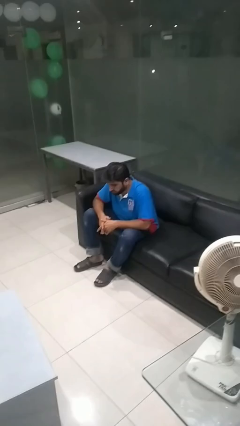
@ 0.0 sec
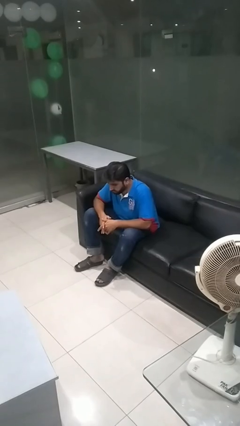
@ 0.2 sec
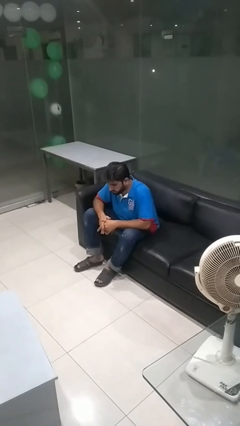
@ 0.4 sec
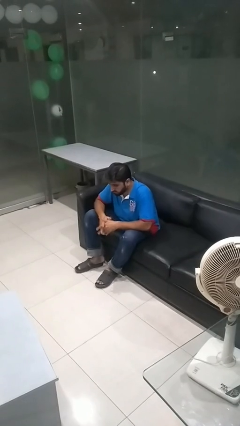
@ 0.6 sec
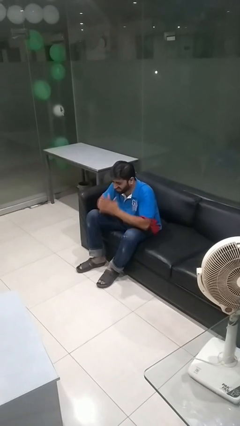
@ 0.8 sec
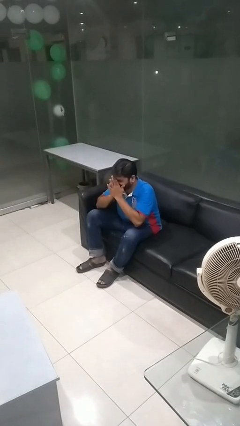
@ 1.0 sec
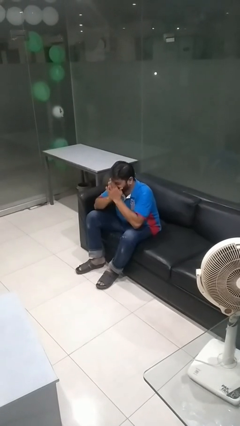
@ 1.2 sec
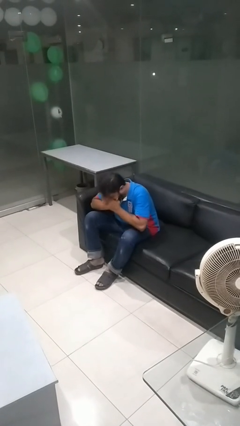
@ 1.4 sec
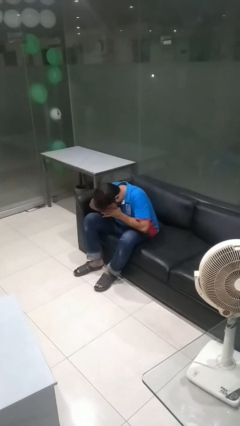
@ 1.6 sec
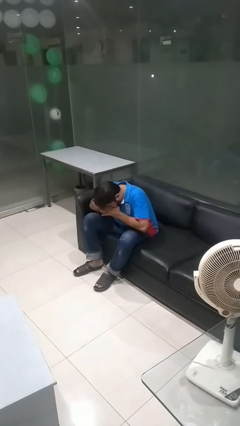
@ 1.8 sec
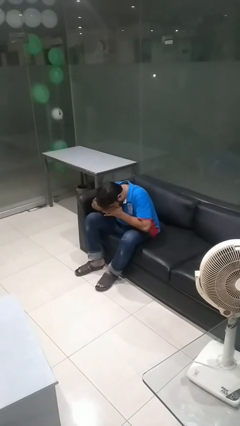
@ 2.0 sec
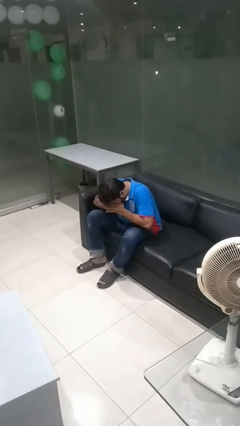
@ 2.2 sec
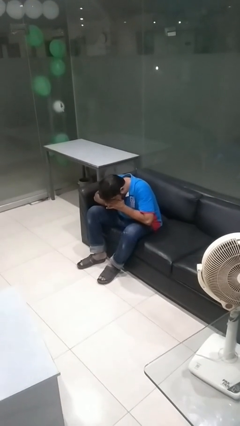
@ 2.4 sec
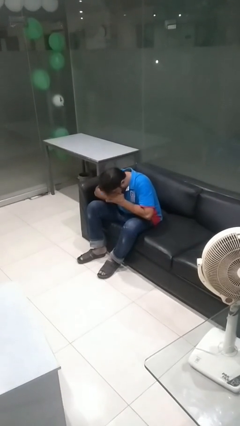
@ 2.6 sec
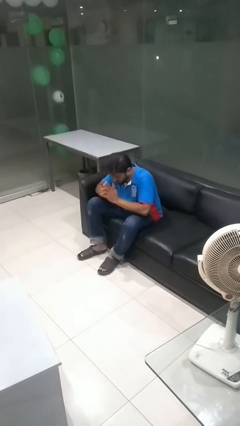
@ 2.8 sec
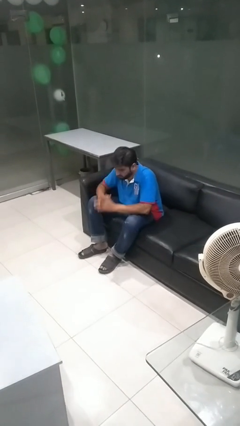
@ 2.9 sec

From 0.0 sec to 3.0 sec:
person covers face with hands

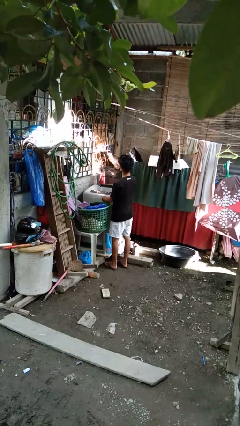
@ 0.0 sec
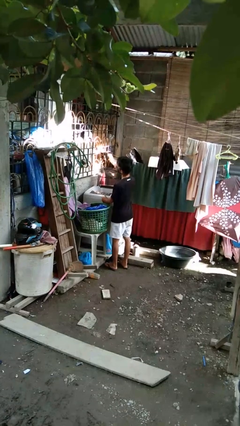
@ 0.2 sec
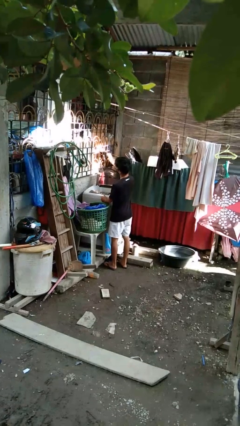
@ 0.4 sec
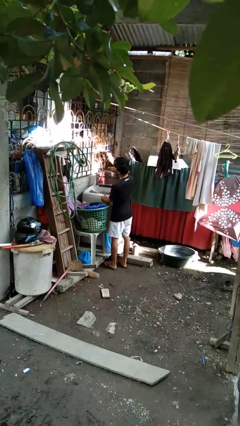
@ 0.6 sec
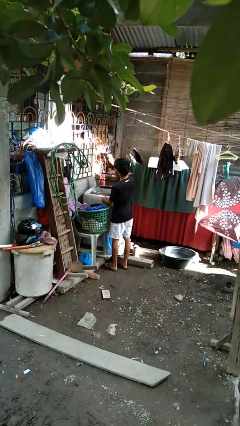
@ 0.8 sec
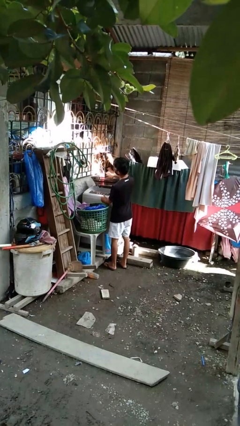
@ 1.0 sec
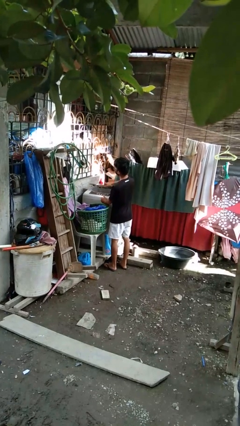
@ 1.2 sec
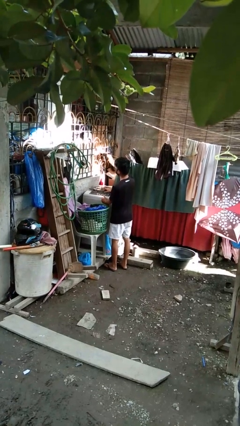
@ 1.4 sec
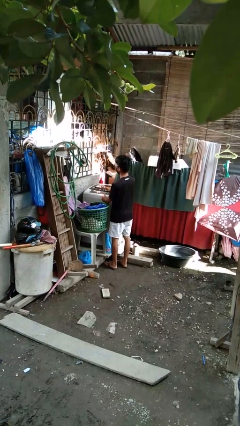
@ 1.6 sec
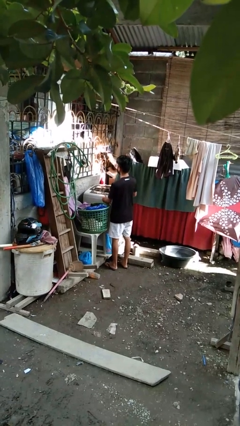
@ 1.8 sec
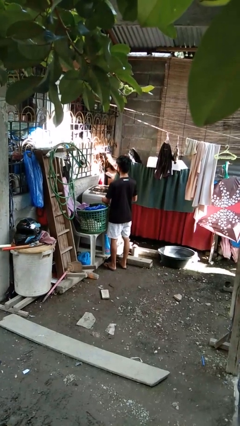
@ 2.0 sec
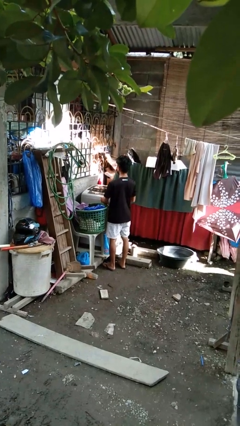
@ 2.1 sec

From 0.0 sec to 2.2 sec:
person closes clothes washer

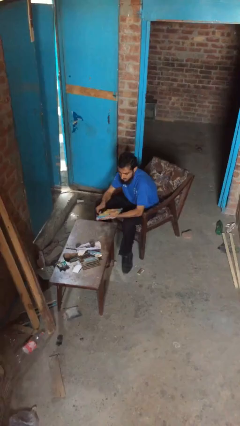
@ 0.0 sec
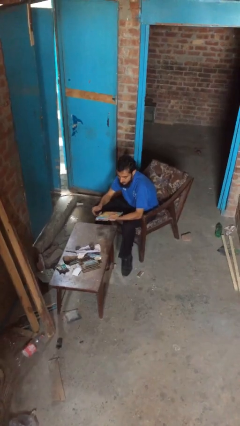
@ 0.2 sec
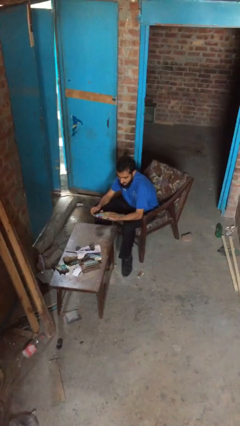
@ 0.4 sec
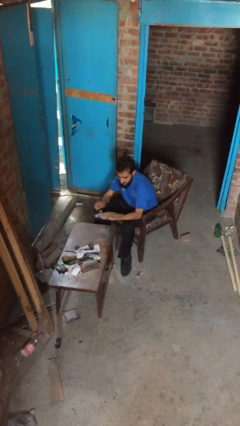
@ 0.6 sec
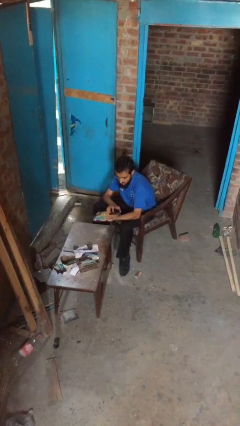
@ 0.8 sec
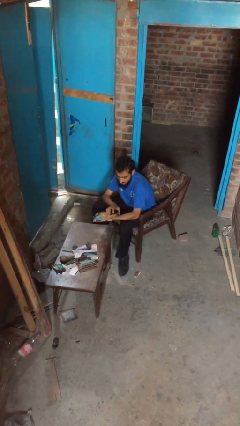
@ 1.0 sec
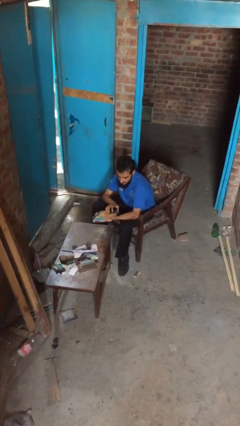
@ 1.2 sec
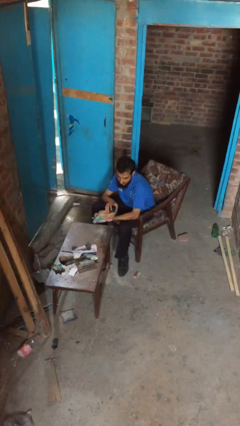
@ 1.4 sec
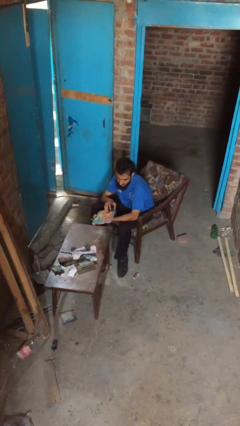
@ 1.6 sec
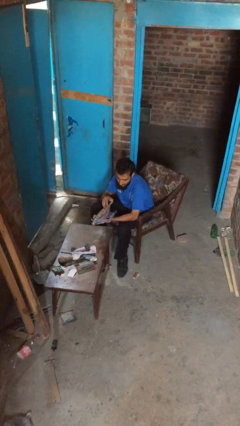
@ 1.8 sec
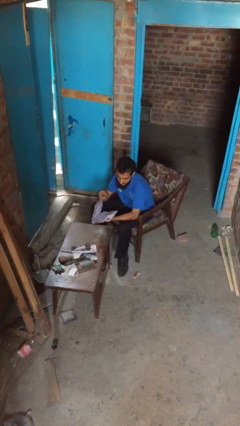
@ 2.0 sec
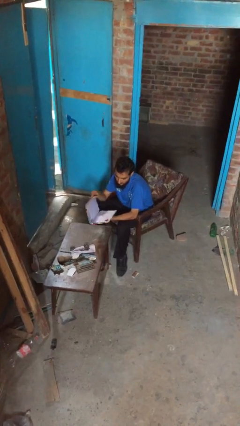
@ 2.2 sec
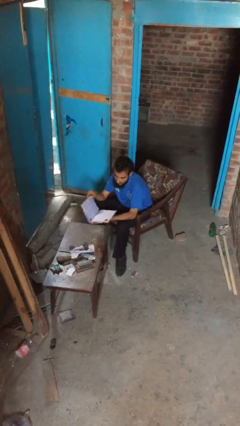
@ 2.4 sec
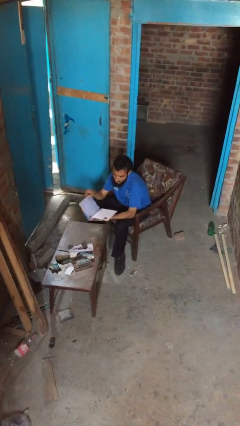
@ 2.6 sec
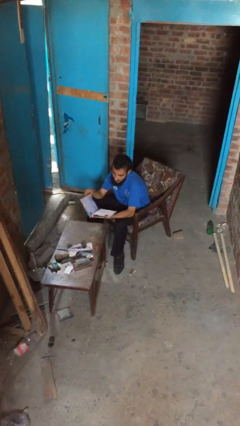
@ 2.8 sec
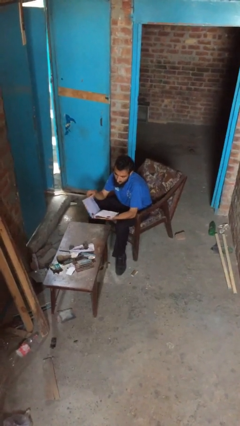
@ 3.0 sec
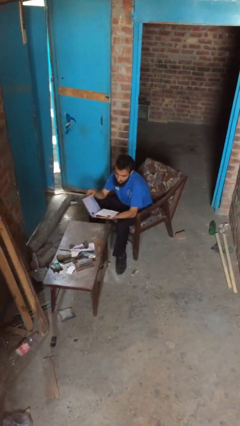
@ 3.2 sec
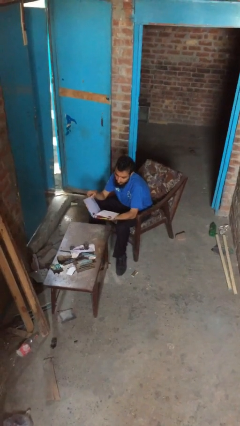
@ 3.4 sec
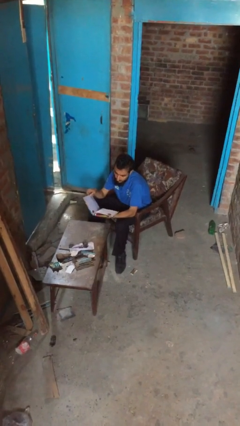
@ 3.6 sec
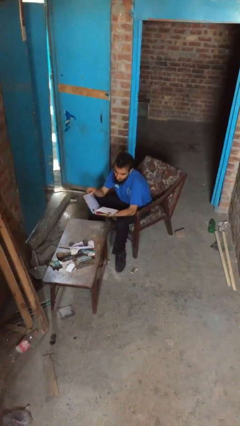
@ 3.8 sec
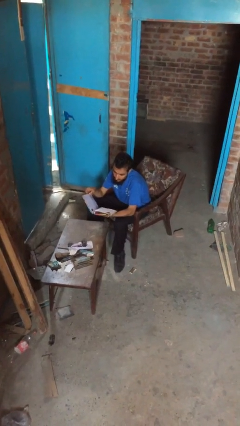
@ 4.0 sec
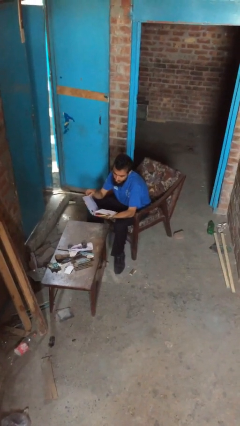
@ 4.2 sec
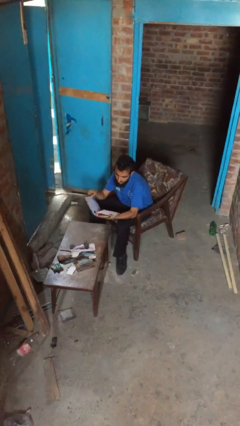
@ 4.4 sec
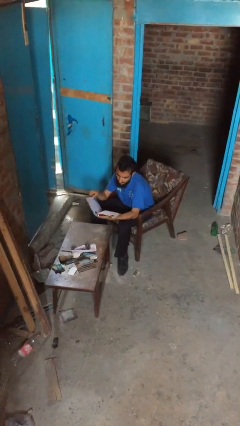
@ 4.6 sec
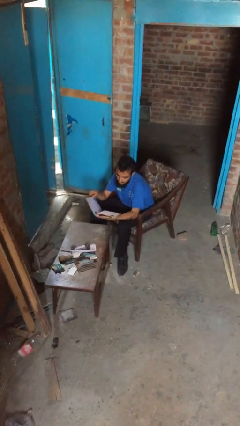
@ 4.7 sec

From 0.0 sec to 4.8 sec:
person reads document

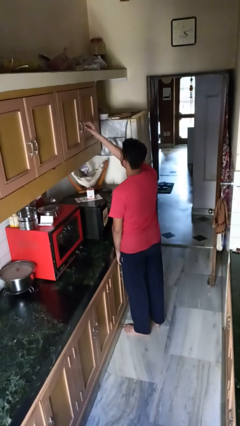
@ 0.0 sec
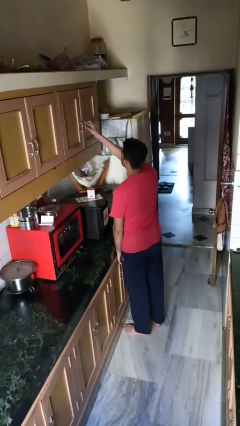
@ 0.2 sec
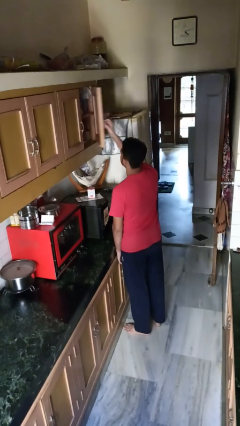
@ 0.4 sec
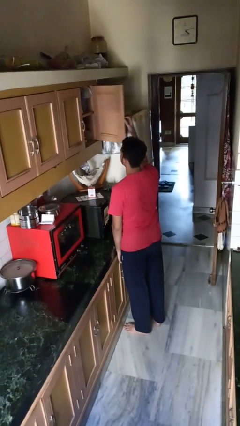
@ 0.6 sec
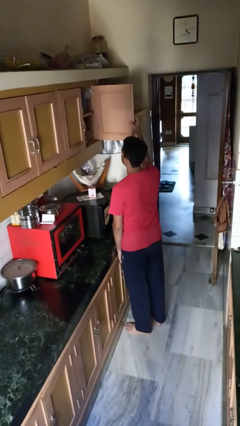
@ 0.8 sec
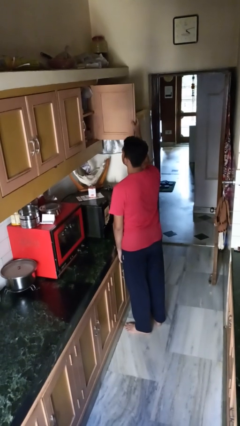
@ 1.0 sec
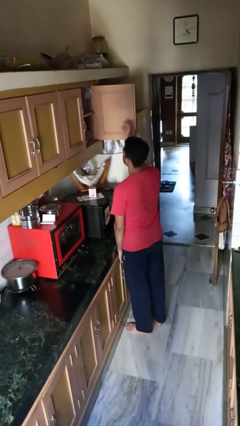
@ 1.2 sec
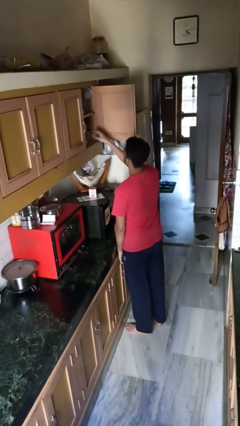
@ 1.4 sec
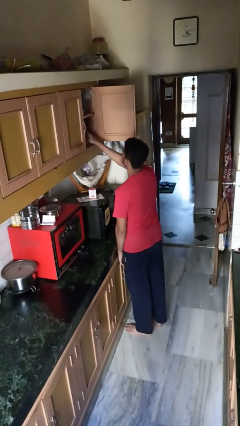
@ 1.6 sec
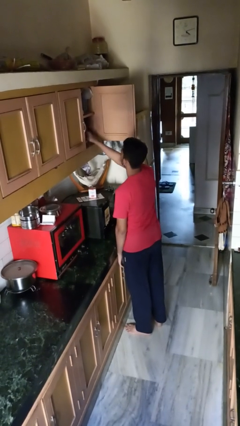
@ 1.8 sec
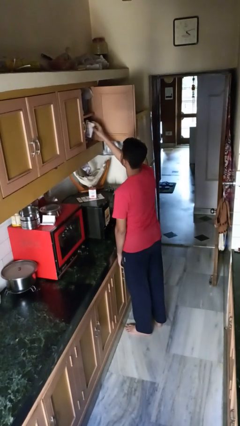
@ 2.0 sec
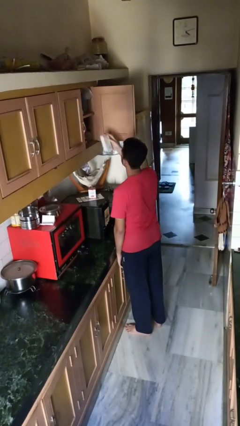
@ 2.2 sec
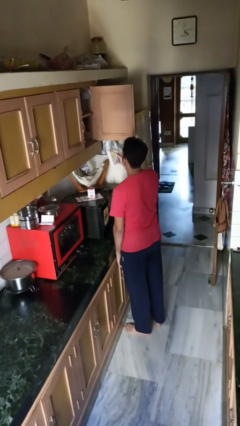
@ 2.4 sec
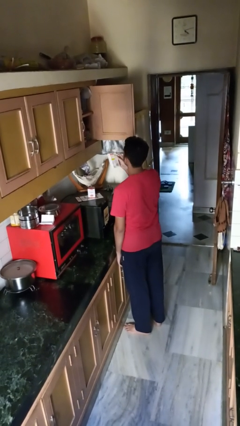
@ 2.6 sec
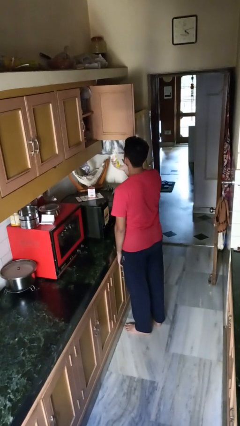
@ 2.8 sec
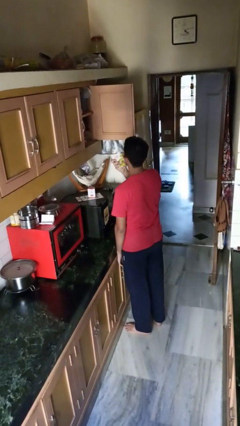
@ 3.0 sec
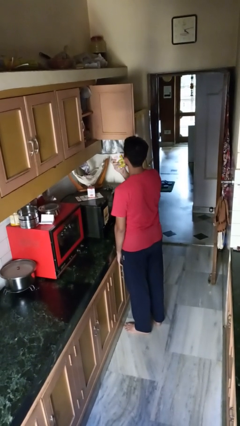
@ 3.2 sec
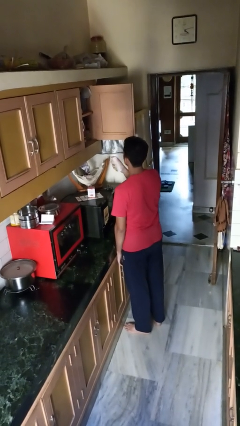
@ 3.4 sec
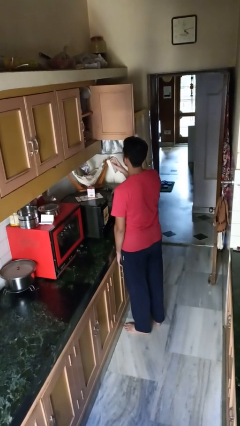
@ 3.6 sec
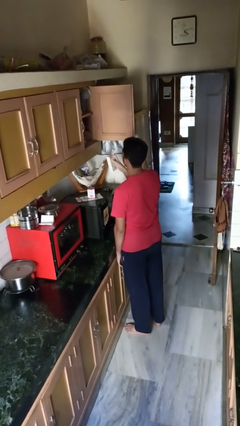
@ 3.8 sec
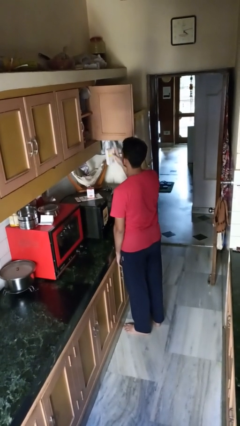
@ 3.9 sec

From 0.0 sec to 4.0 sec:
person takes object from cabinet

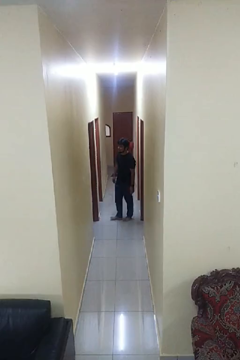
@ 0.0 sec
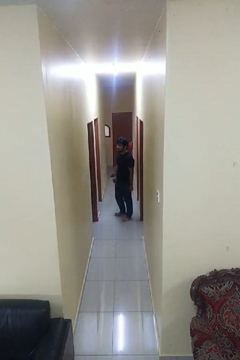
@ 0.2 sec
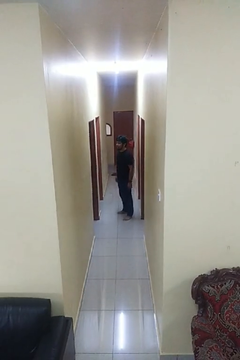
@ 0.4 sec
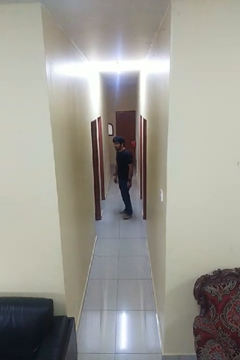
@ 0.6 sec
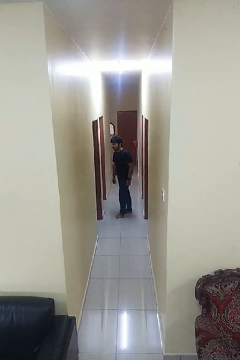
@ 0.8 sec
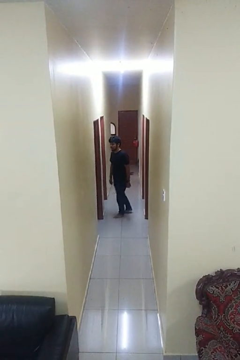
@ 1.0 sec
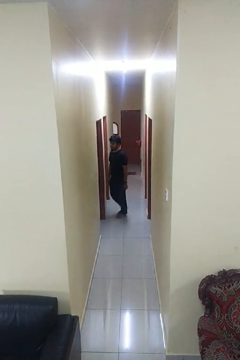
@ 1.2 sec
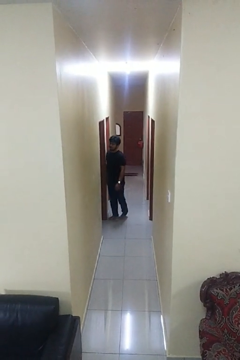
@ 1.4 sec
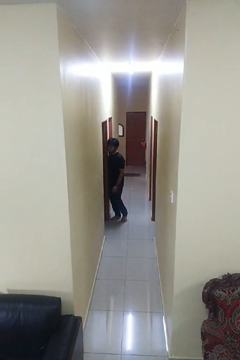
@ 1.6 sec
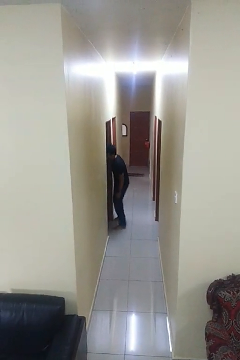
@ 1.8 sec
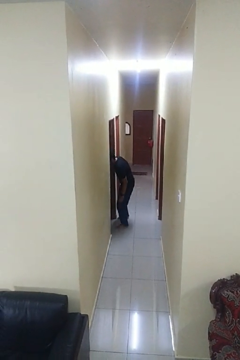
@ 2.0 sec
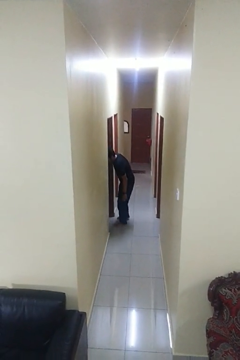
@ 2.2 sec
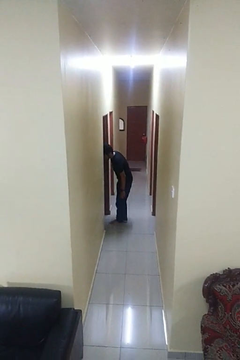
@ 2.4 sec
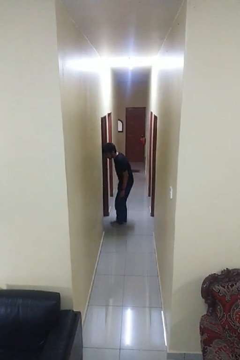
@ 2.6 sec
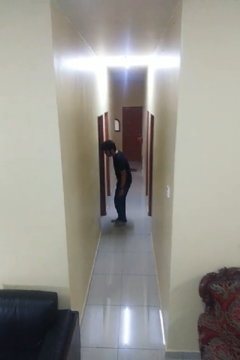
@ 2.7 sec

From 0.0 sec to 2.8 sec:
person bumps into wall

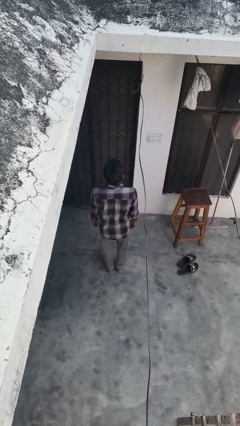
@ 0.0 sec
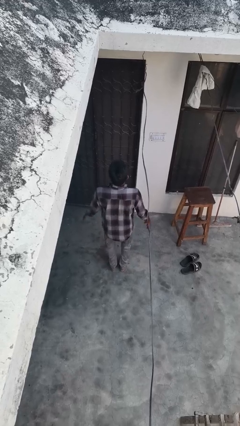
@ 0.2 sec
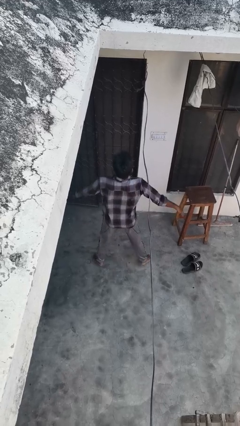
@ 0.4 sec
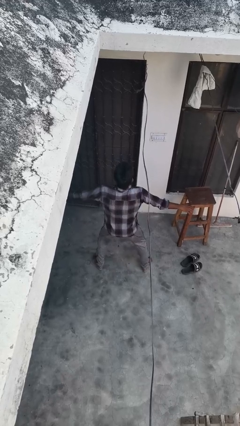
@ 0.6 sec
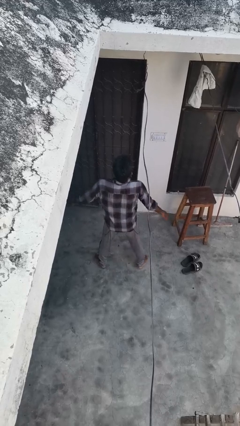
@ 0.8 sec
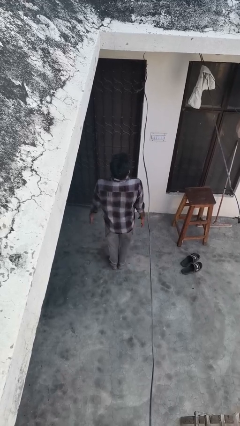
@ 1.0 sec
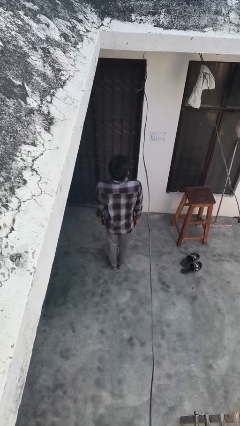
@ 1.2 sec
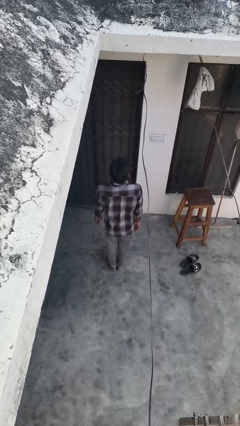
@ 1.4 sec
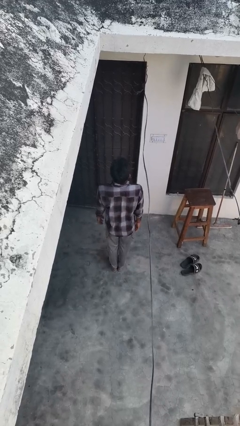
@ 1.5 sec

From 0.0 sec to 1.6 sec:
person exercises with jumping jacks
